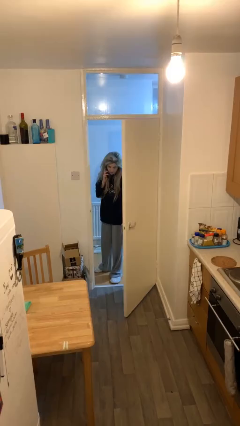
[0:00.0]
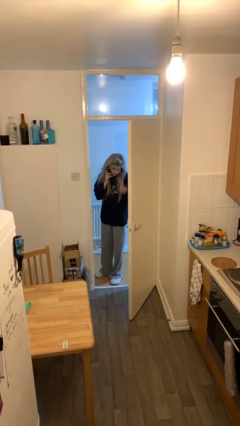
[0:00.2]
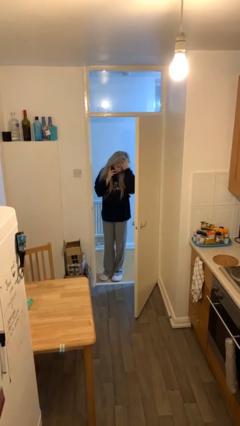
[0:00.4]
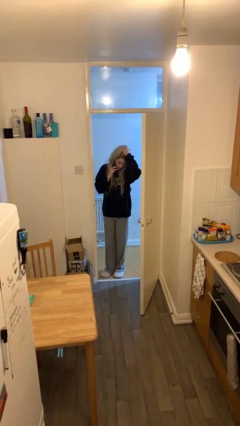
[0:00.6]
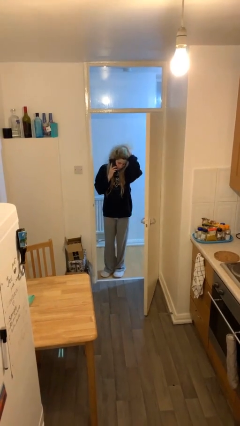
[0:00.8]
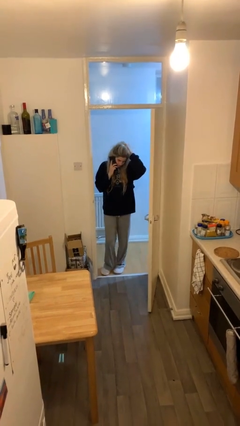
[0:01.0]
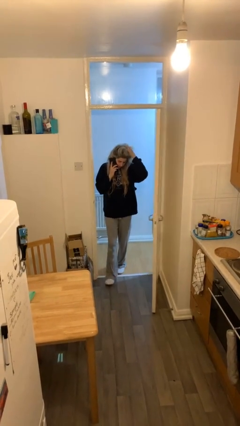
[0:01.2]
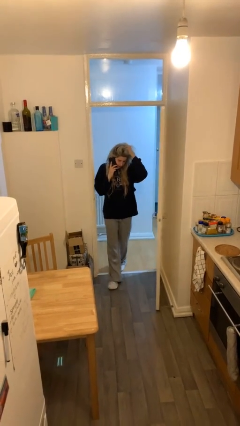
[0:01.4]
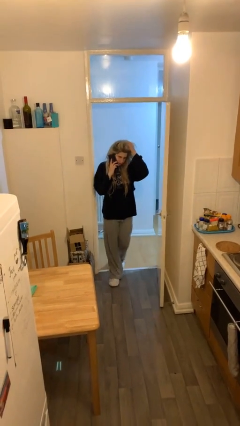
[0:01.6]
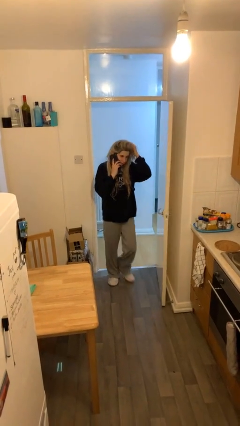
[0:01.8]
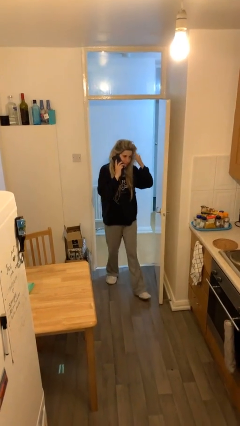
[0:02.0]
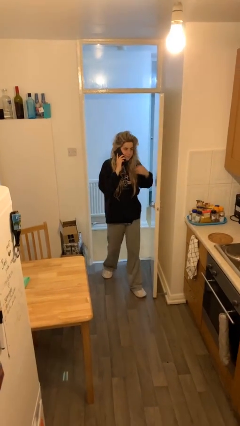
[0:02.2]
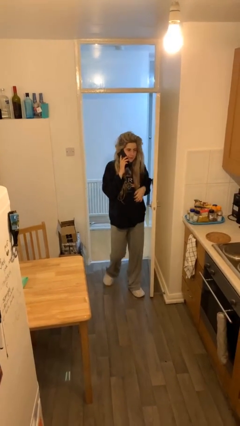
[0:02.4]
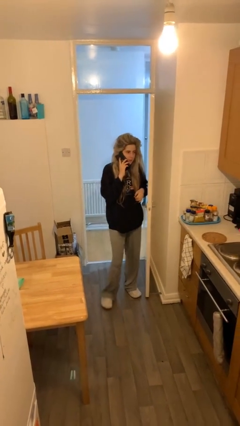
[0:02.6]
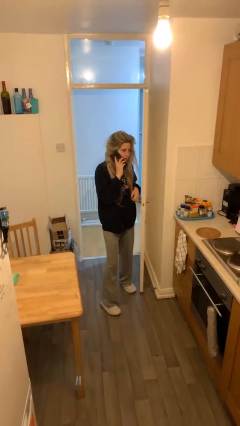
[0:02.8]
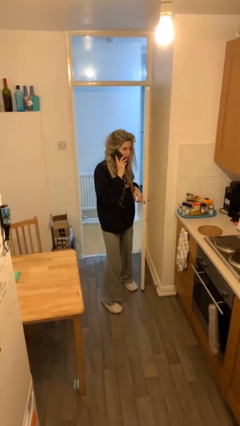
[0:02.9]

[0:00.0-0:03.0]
person enters scene through structure

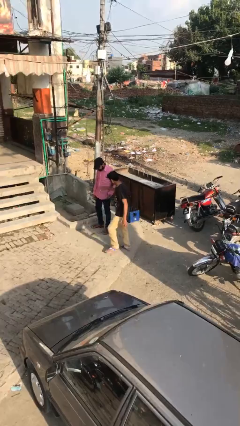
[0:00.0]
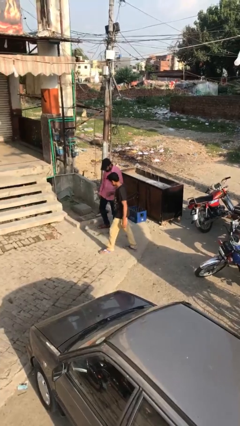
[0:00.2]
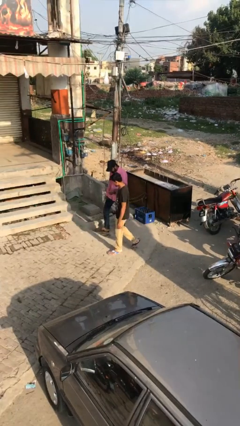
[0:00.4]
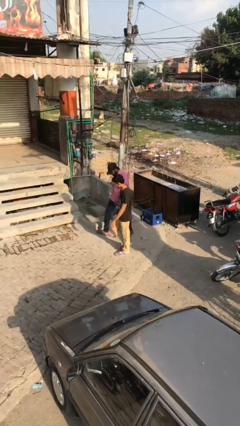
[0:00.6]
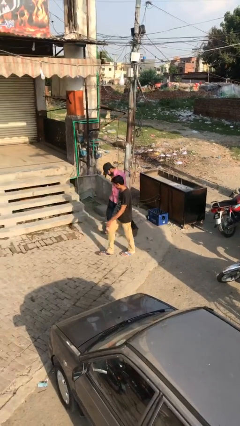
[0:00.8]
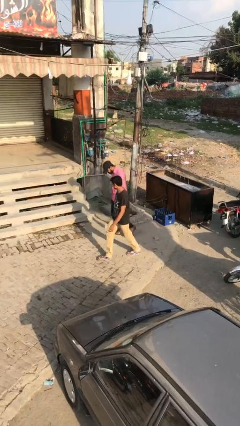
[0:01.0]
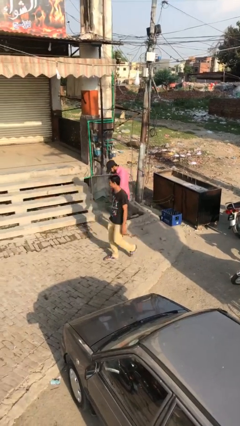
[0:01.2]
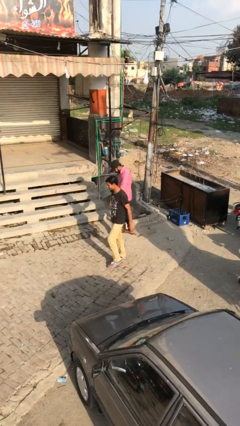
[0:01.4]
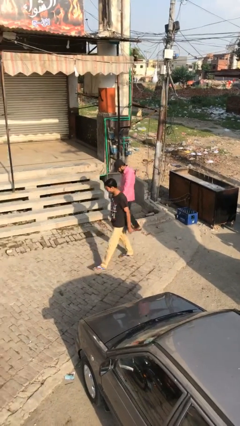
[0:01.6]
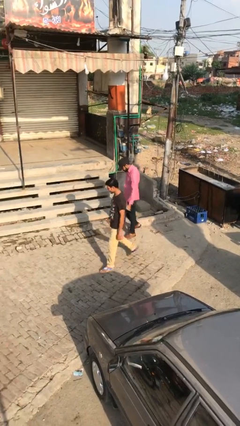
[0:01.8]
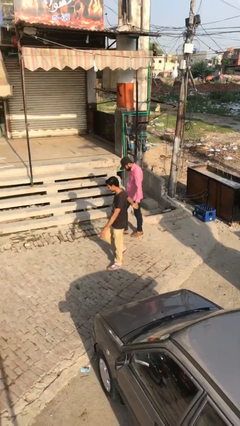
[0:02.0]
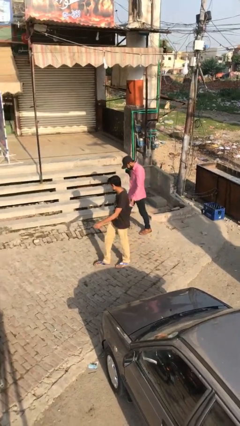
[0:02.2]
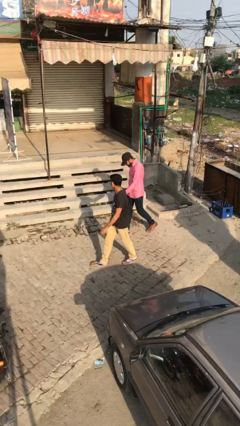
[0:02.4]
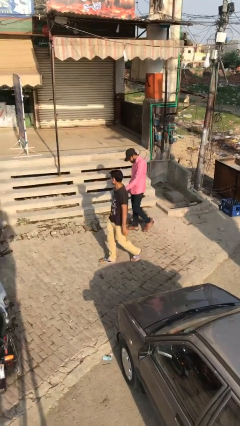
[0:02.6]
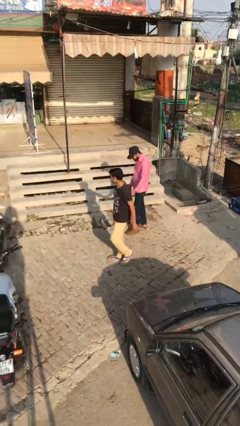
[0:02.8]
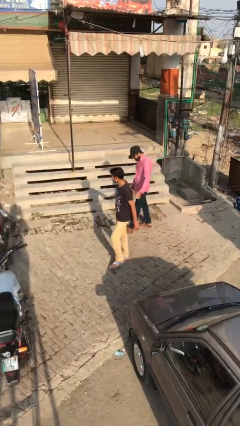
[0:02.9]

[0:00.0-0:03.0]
person holds hand

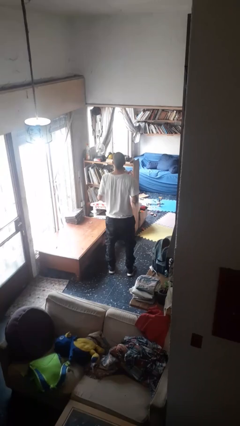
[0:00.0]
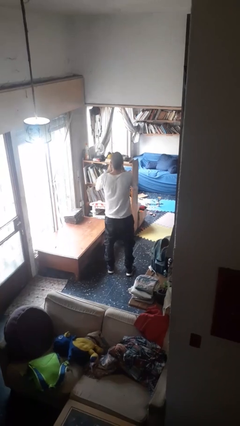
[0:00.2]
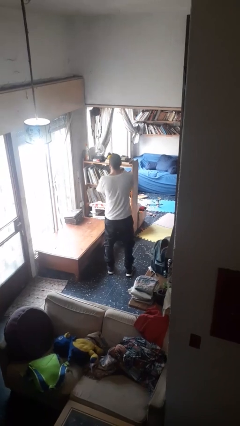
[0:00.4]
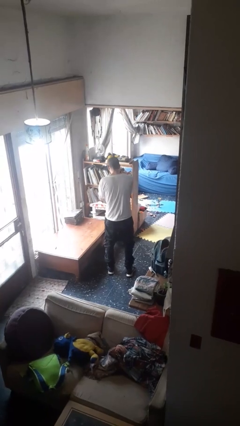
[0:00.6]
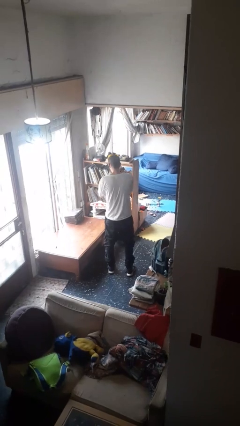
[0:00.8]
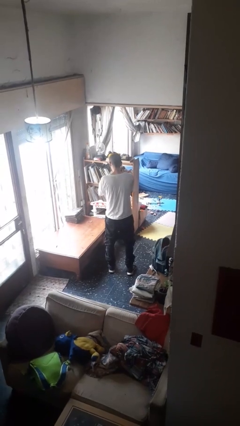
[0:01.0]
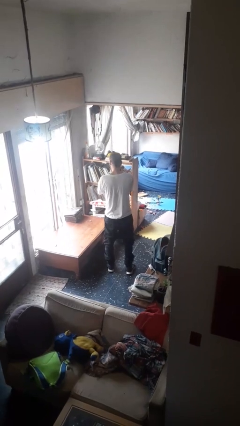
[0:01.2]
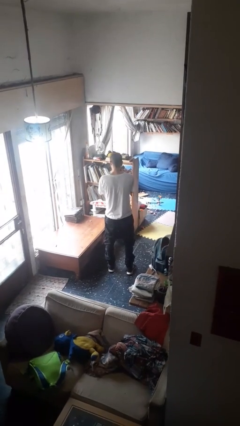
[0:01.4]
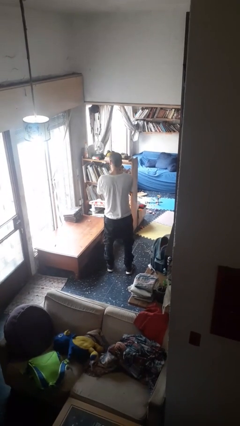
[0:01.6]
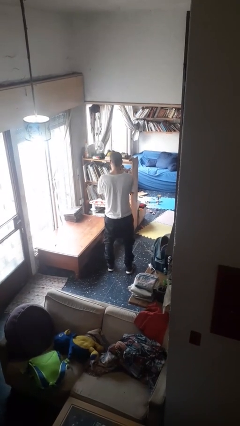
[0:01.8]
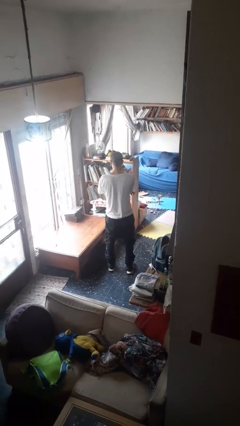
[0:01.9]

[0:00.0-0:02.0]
person sneezes into hand

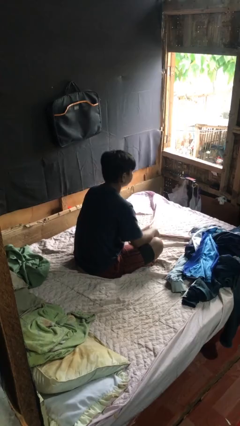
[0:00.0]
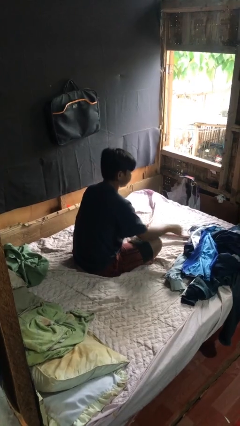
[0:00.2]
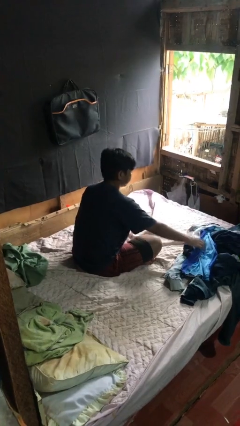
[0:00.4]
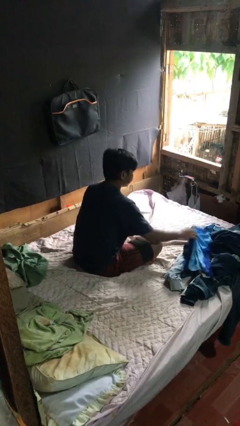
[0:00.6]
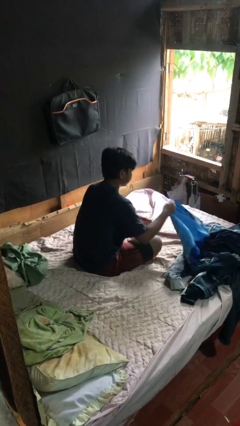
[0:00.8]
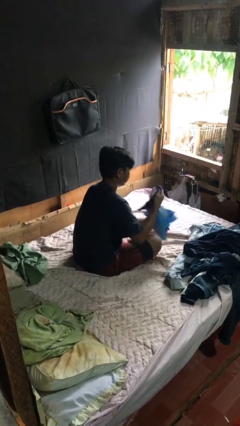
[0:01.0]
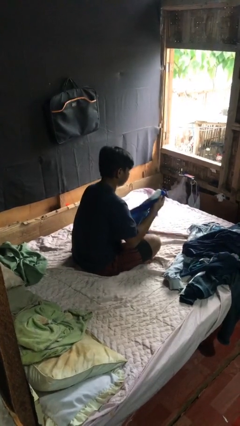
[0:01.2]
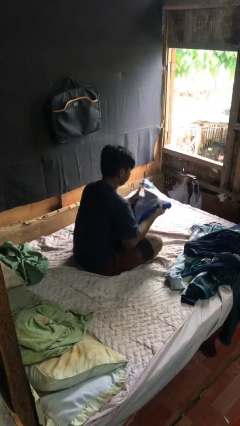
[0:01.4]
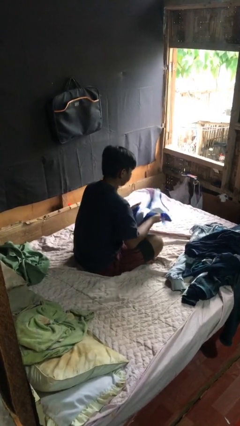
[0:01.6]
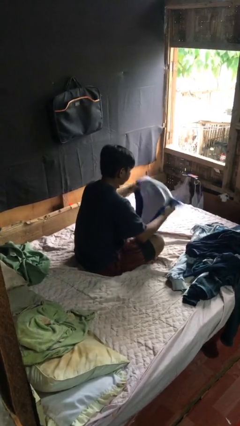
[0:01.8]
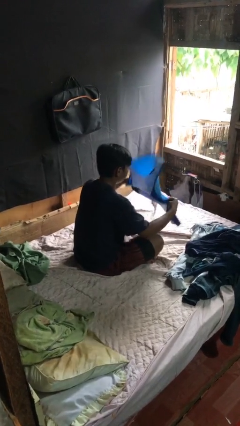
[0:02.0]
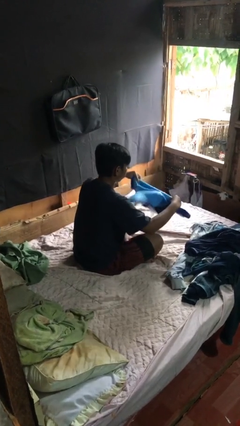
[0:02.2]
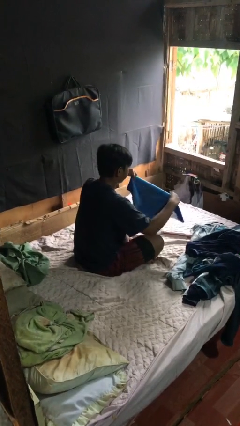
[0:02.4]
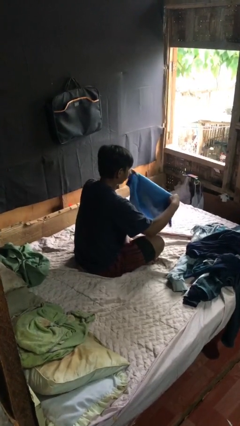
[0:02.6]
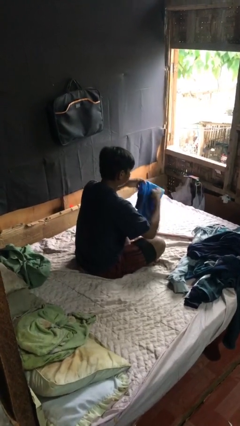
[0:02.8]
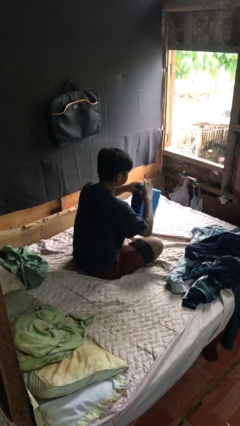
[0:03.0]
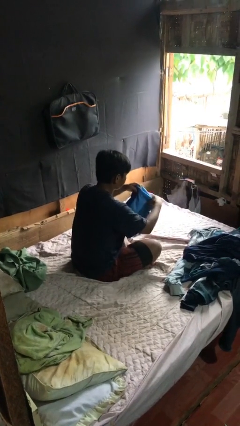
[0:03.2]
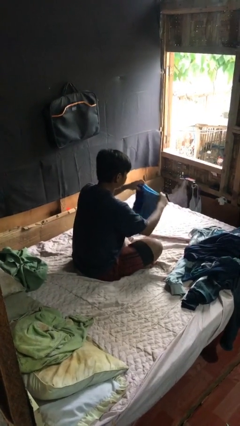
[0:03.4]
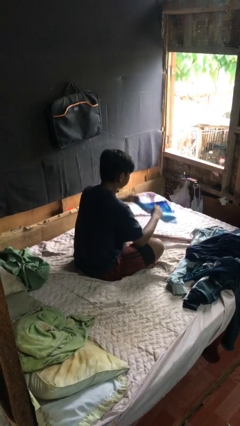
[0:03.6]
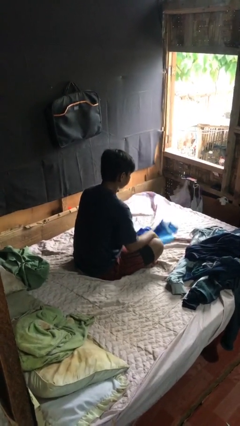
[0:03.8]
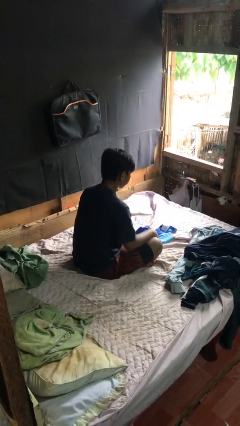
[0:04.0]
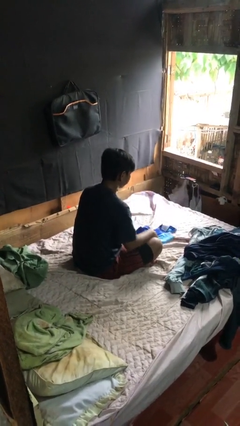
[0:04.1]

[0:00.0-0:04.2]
person folds shirt

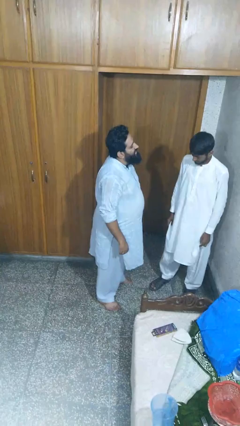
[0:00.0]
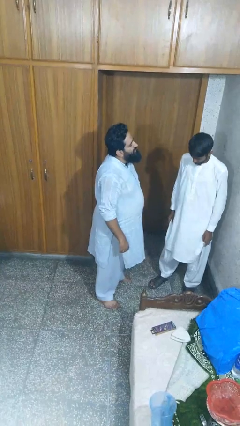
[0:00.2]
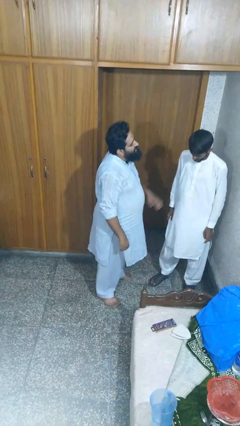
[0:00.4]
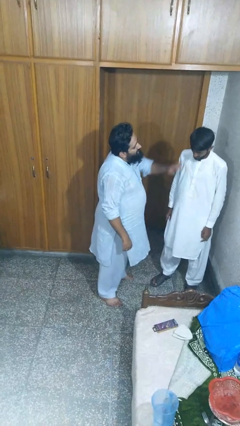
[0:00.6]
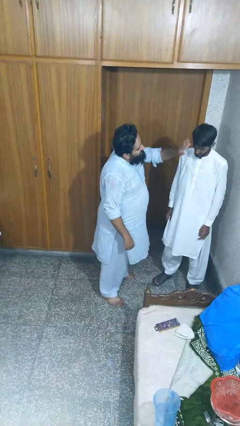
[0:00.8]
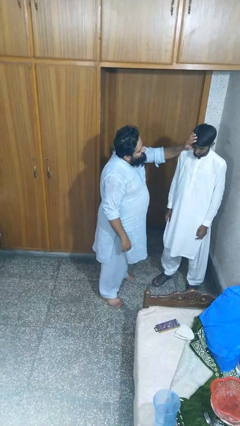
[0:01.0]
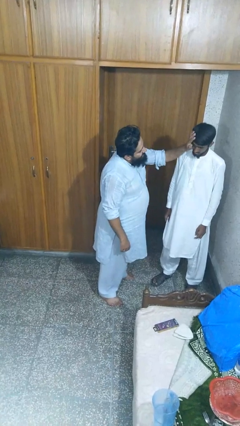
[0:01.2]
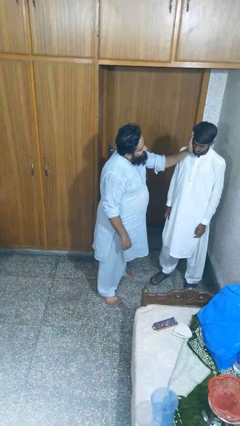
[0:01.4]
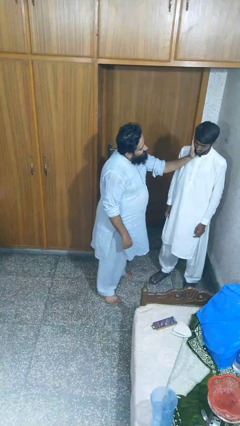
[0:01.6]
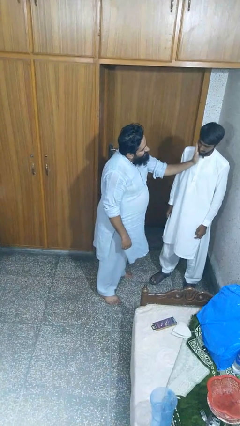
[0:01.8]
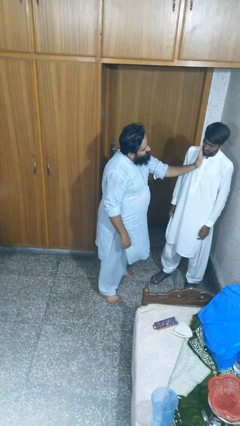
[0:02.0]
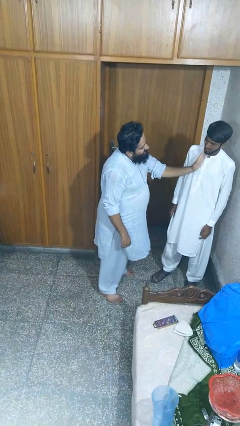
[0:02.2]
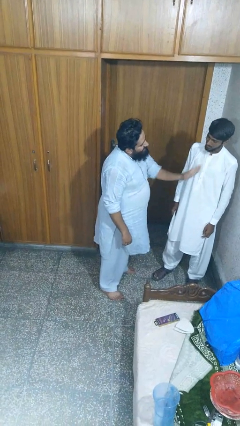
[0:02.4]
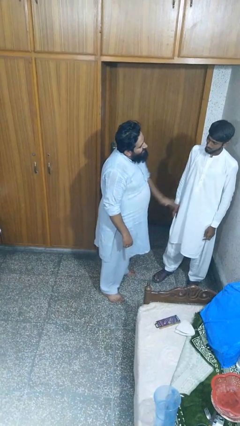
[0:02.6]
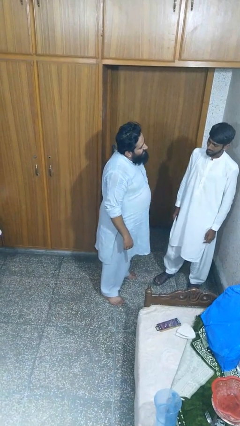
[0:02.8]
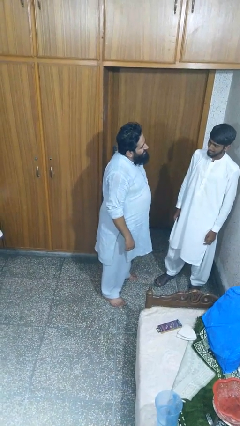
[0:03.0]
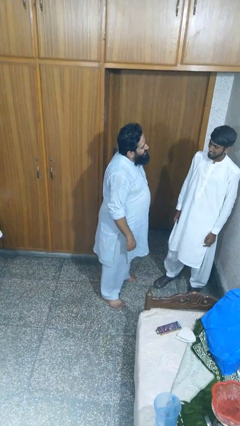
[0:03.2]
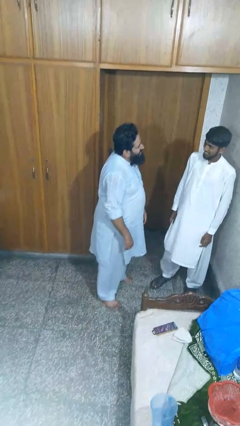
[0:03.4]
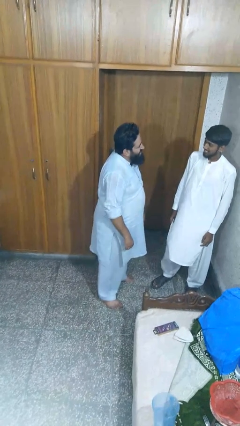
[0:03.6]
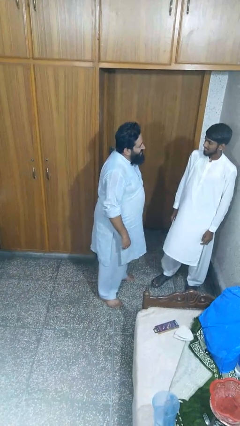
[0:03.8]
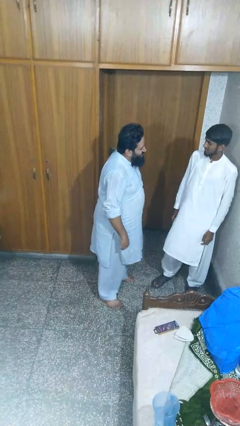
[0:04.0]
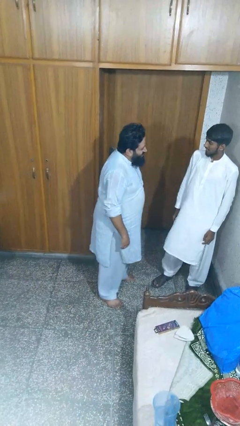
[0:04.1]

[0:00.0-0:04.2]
person touches face of person

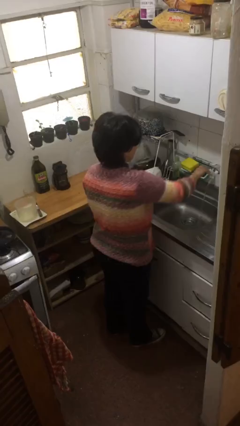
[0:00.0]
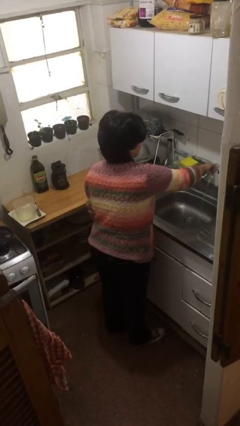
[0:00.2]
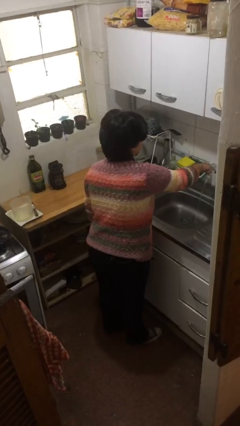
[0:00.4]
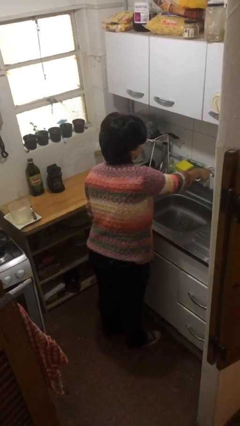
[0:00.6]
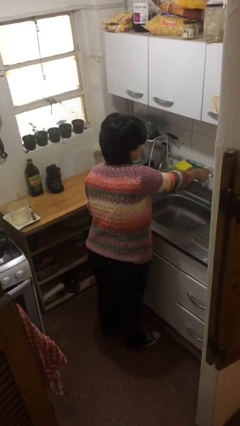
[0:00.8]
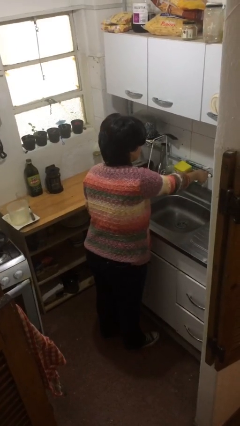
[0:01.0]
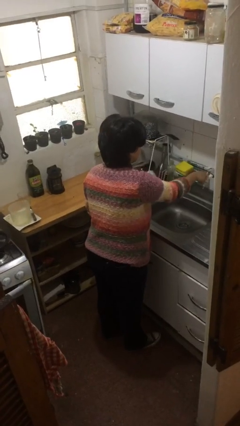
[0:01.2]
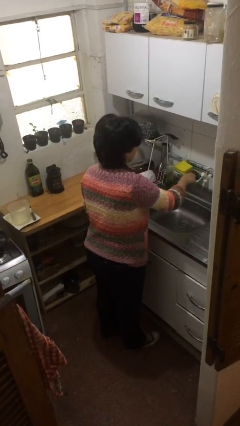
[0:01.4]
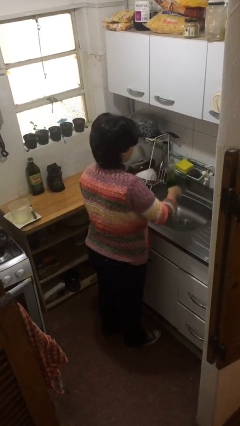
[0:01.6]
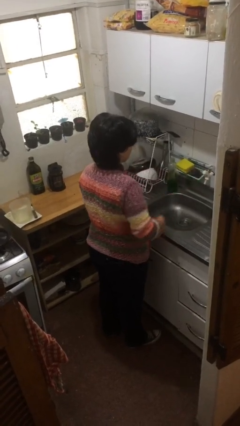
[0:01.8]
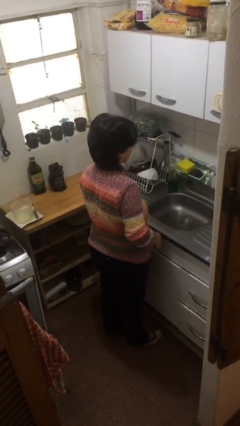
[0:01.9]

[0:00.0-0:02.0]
person turns off faucet
